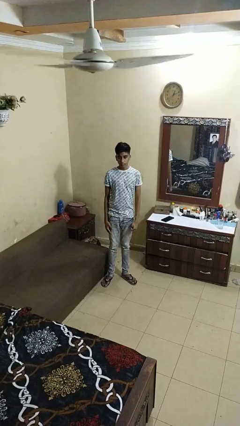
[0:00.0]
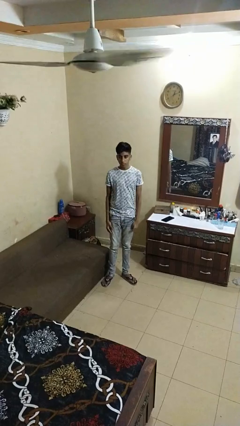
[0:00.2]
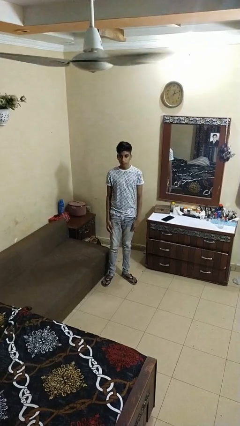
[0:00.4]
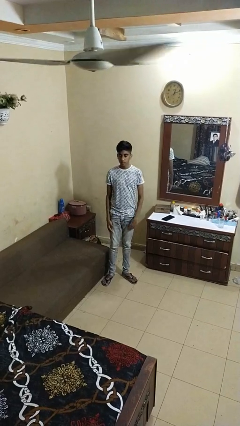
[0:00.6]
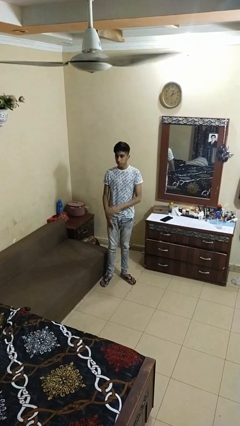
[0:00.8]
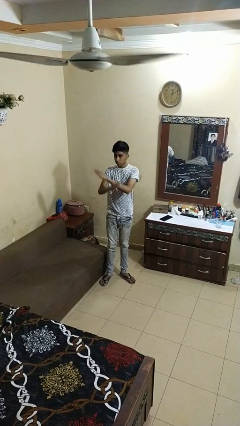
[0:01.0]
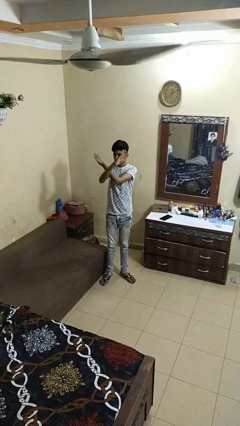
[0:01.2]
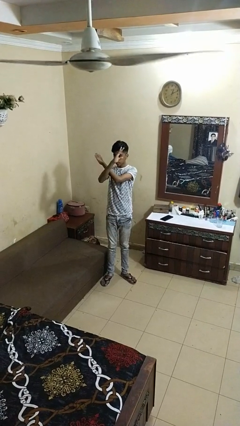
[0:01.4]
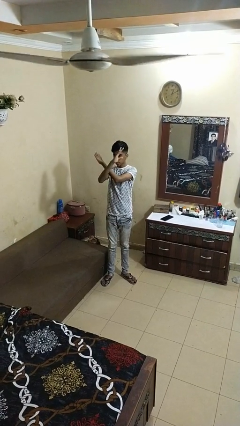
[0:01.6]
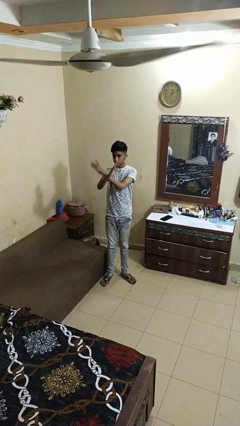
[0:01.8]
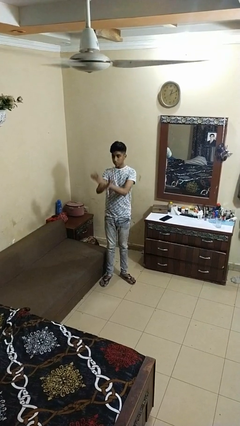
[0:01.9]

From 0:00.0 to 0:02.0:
person gestures arms x

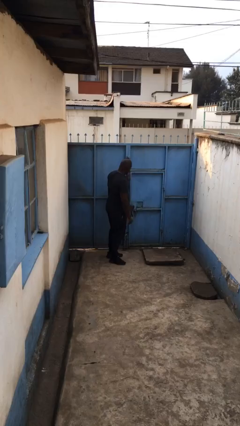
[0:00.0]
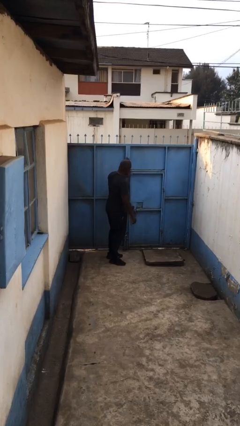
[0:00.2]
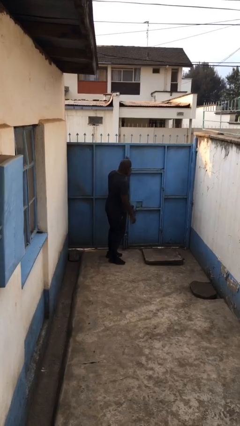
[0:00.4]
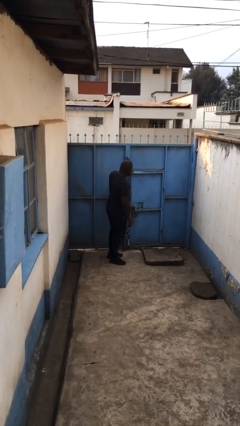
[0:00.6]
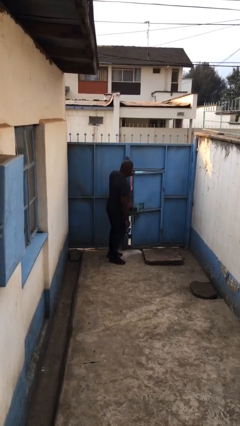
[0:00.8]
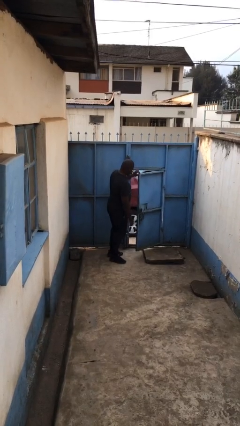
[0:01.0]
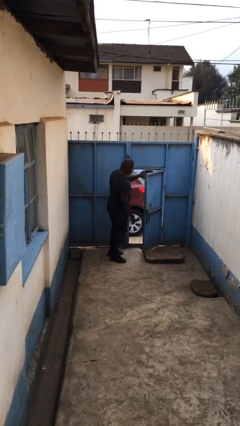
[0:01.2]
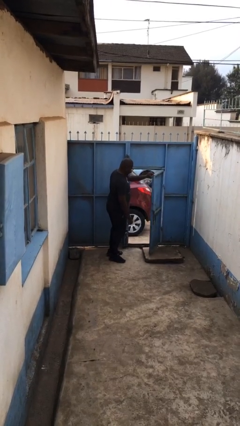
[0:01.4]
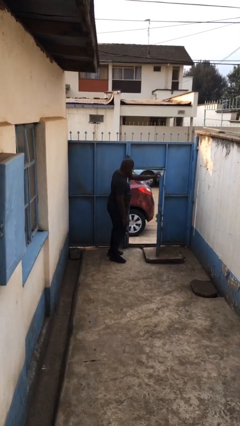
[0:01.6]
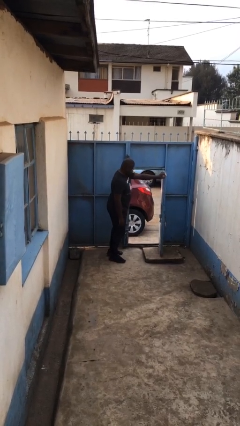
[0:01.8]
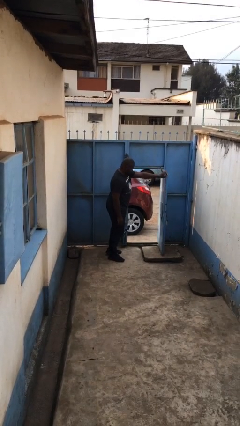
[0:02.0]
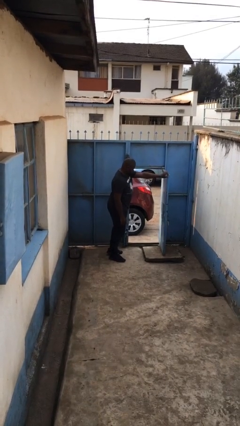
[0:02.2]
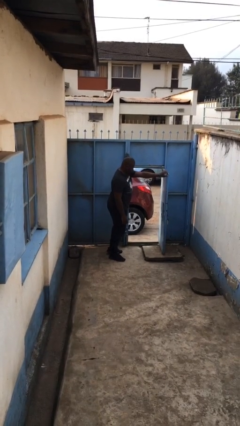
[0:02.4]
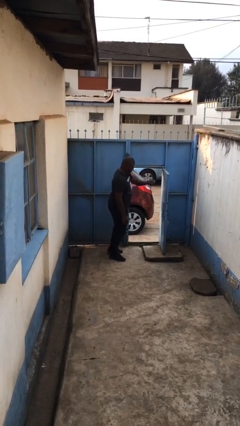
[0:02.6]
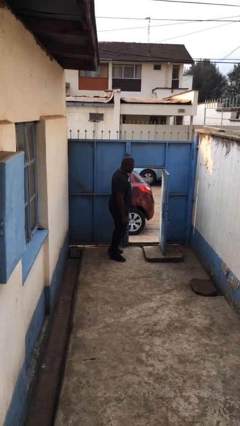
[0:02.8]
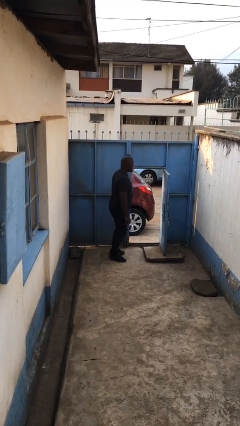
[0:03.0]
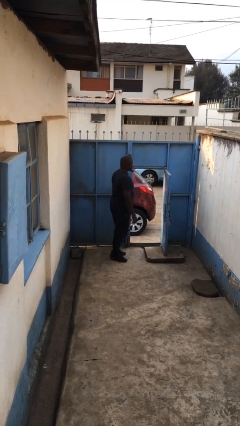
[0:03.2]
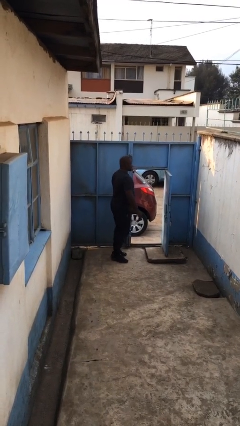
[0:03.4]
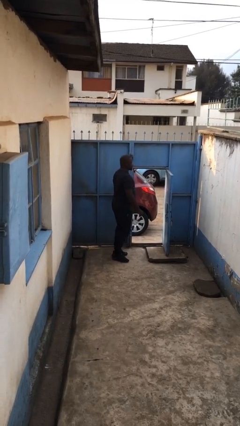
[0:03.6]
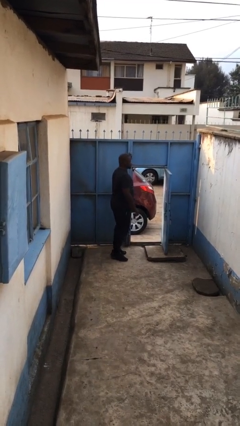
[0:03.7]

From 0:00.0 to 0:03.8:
person opens gate

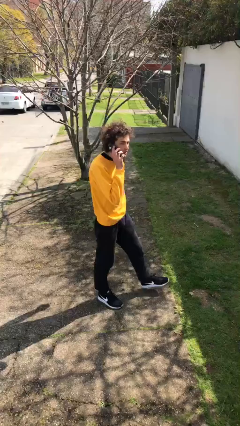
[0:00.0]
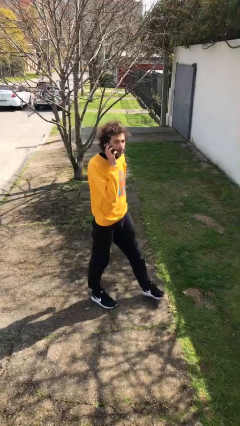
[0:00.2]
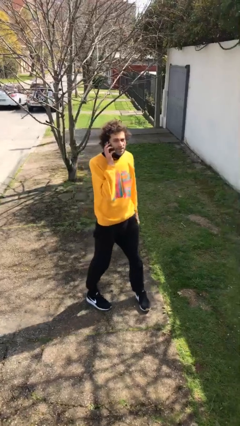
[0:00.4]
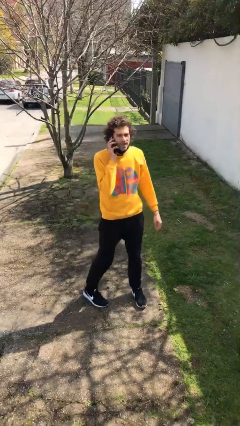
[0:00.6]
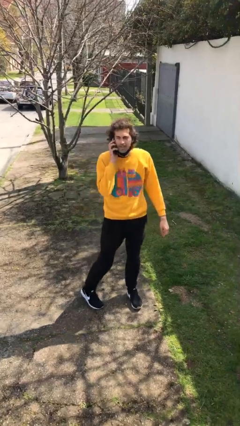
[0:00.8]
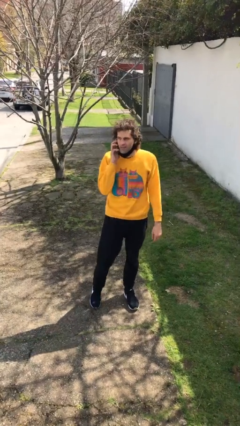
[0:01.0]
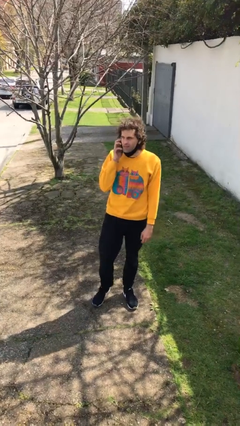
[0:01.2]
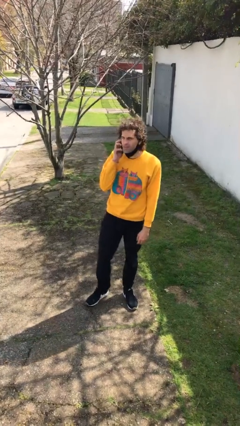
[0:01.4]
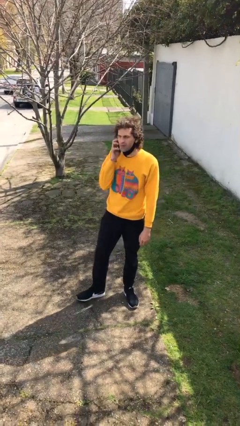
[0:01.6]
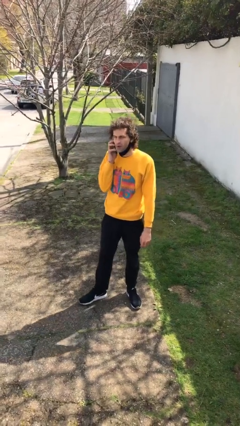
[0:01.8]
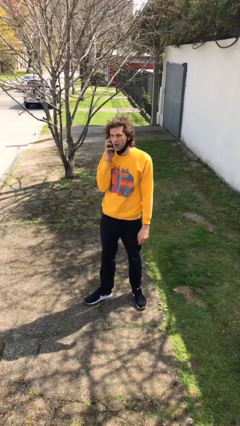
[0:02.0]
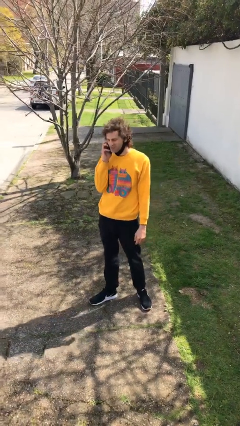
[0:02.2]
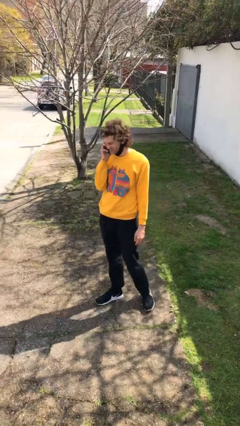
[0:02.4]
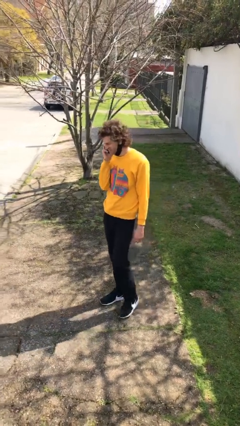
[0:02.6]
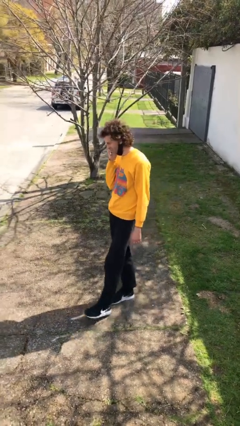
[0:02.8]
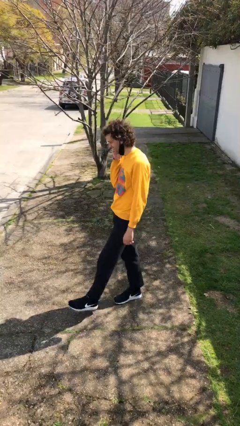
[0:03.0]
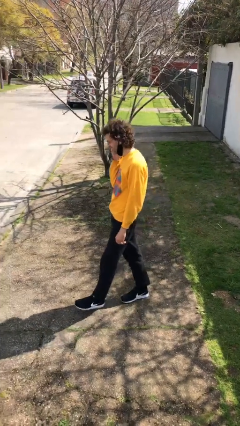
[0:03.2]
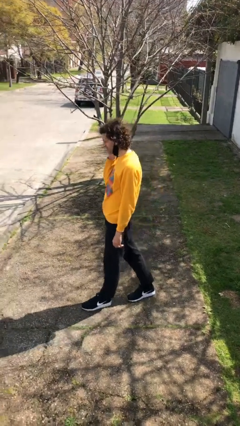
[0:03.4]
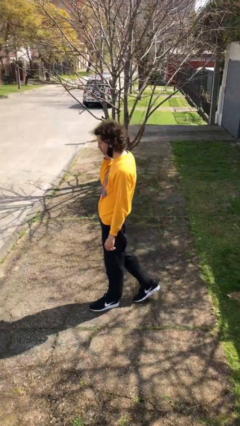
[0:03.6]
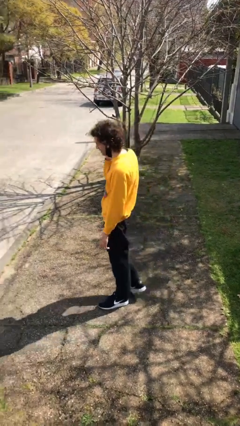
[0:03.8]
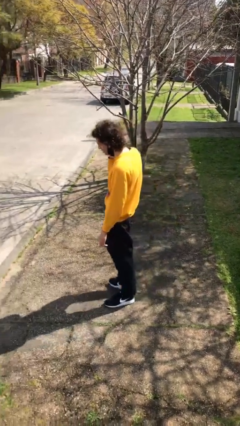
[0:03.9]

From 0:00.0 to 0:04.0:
person talks on phone

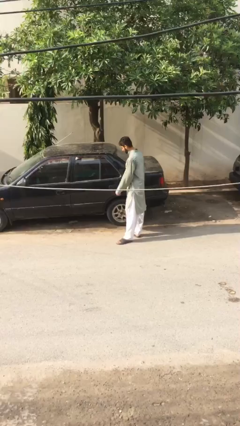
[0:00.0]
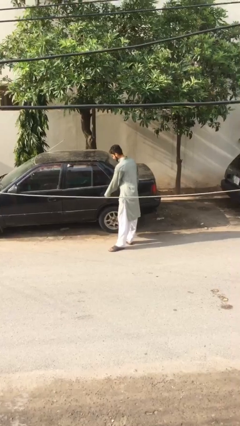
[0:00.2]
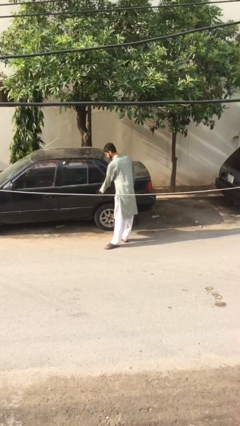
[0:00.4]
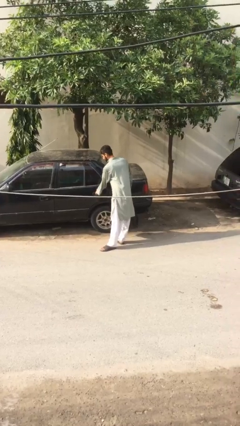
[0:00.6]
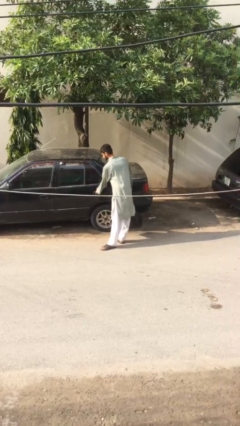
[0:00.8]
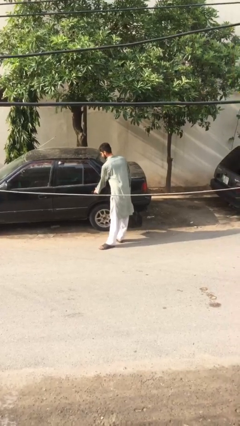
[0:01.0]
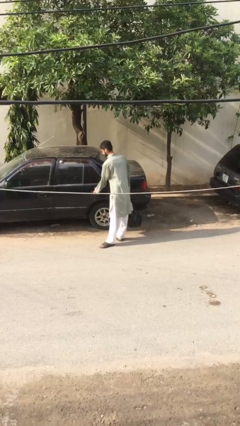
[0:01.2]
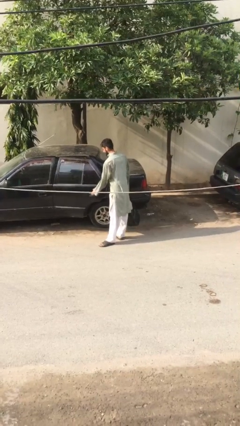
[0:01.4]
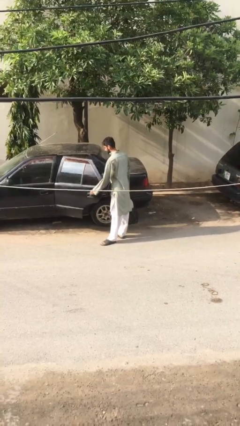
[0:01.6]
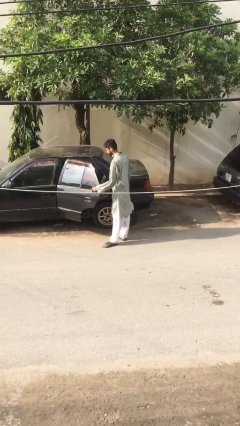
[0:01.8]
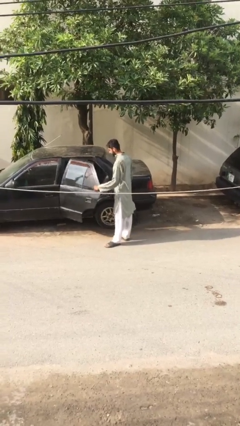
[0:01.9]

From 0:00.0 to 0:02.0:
person opens car door

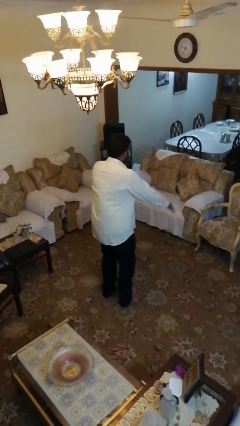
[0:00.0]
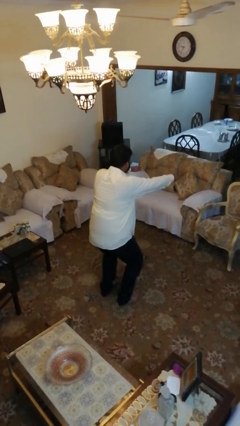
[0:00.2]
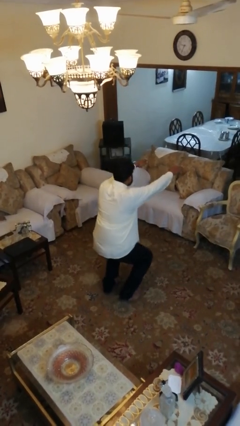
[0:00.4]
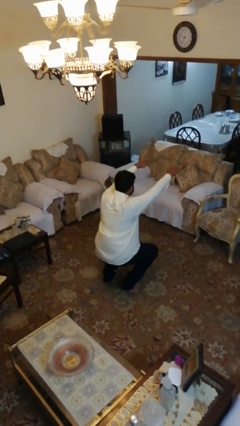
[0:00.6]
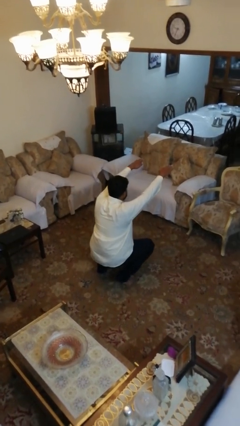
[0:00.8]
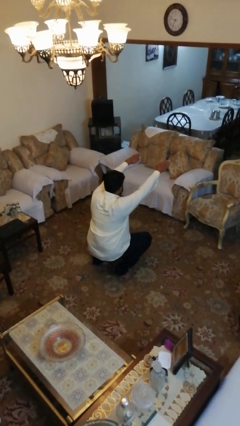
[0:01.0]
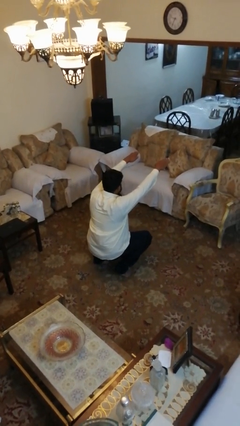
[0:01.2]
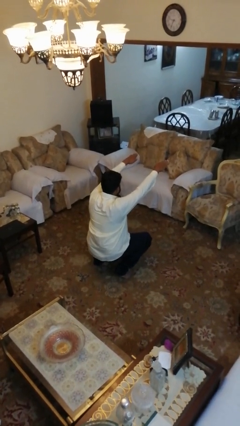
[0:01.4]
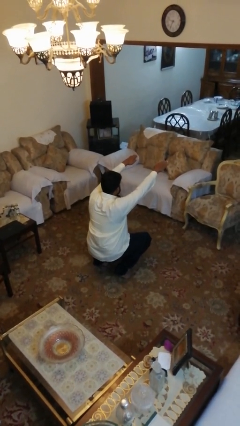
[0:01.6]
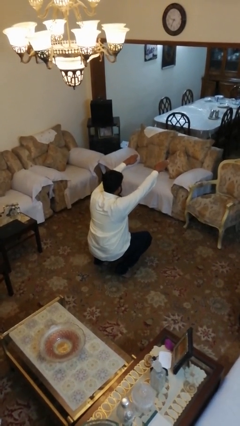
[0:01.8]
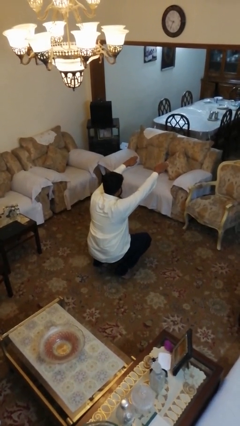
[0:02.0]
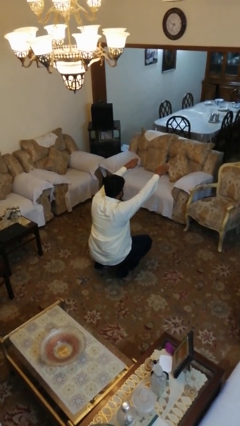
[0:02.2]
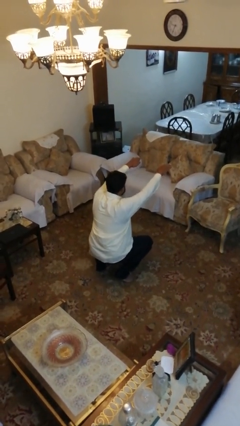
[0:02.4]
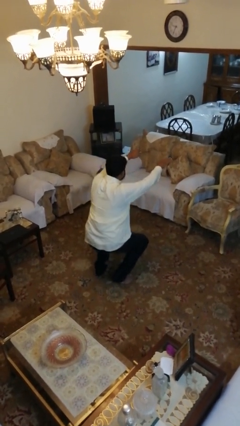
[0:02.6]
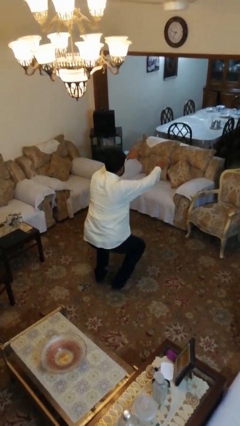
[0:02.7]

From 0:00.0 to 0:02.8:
person squats

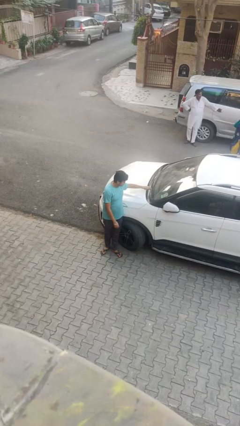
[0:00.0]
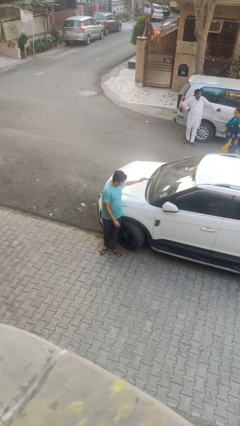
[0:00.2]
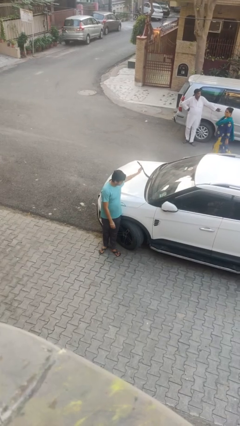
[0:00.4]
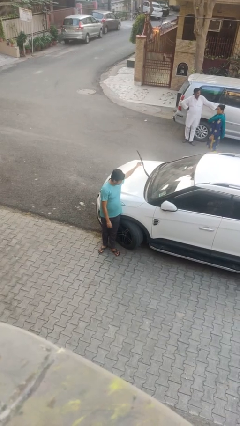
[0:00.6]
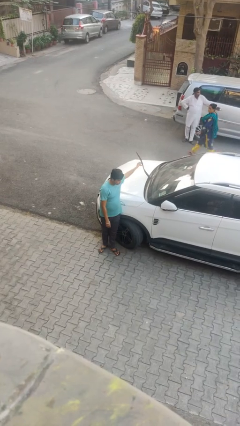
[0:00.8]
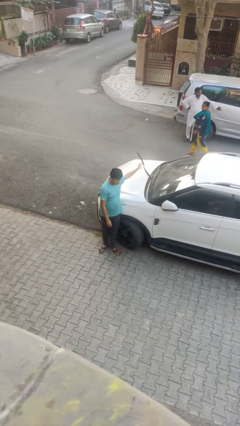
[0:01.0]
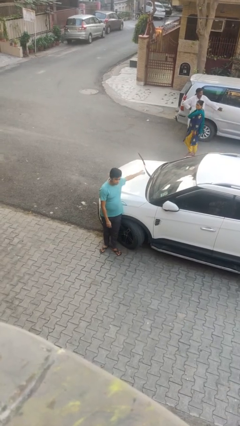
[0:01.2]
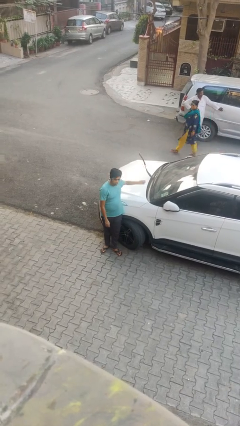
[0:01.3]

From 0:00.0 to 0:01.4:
person flips up car wipers

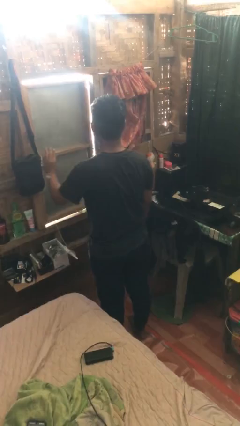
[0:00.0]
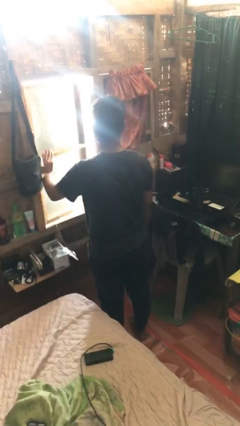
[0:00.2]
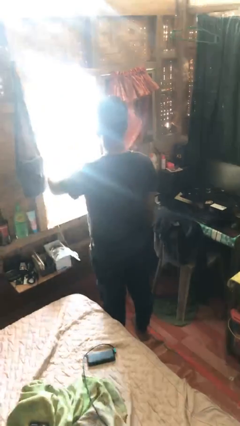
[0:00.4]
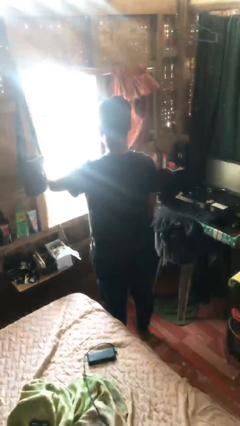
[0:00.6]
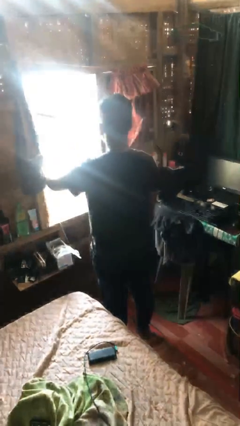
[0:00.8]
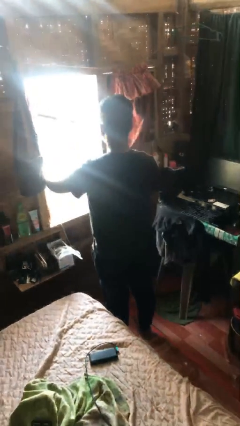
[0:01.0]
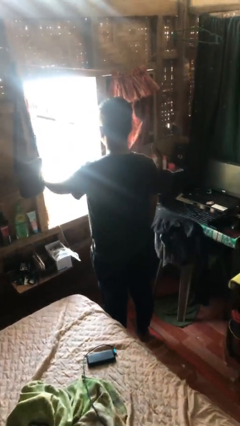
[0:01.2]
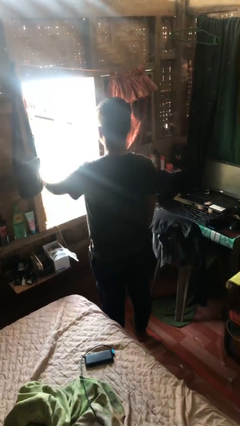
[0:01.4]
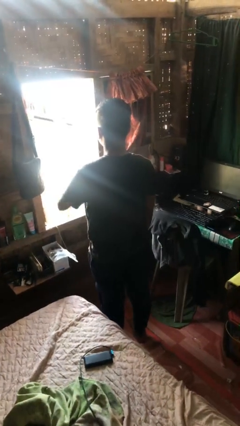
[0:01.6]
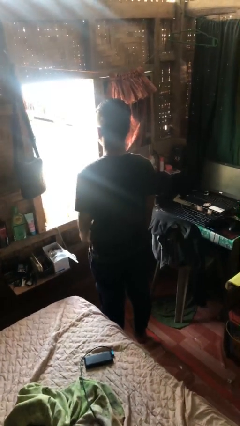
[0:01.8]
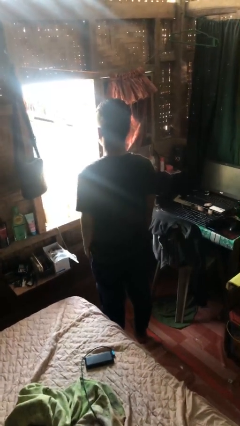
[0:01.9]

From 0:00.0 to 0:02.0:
person opens home window
